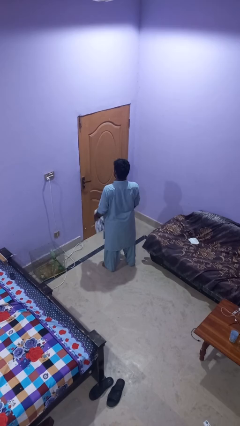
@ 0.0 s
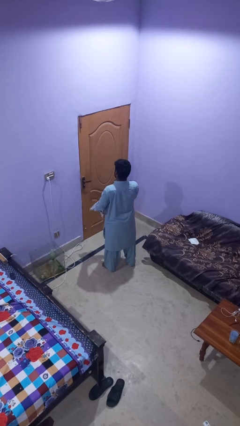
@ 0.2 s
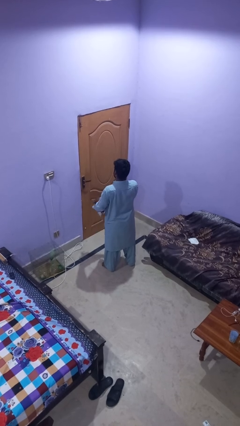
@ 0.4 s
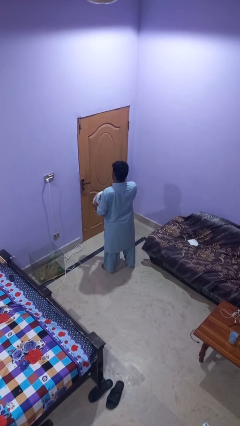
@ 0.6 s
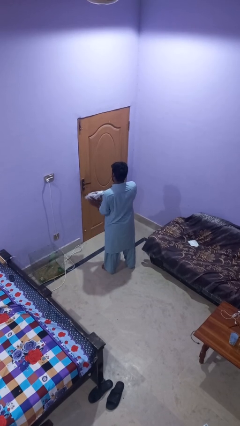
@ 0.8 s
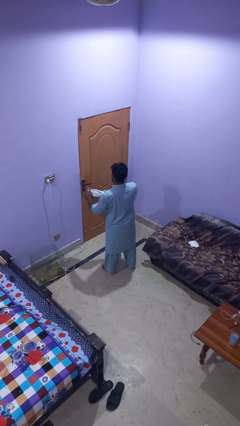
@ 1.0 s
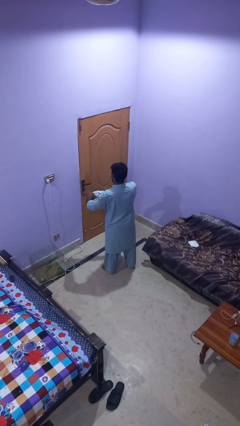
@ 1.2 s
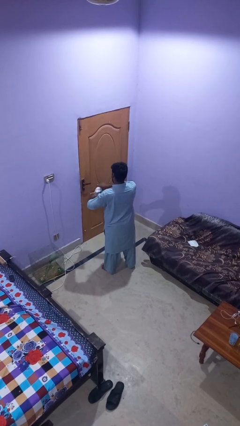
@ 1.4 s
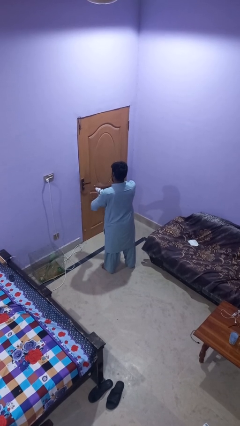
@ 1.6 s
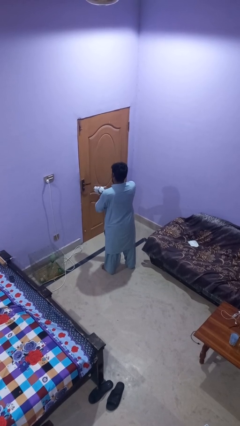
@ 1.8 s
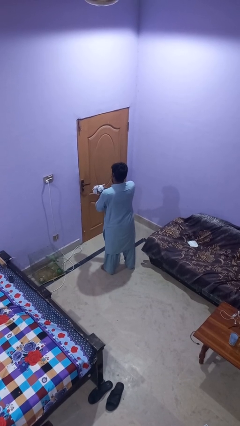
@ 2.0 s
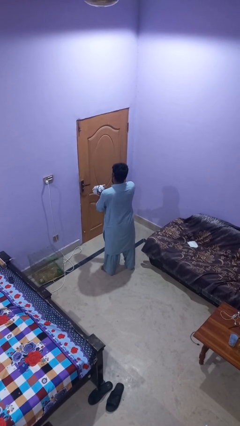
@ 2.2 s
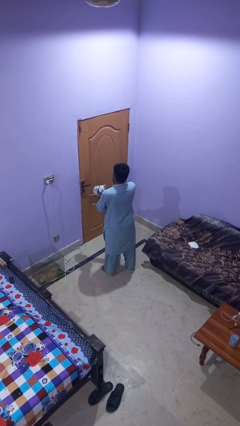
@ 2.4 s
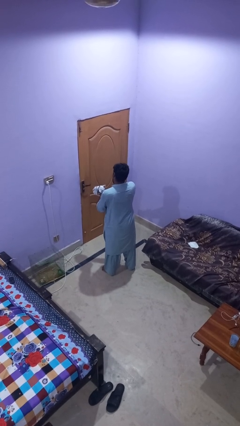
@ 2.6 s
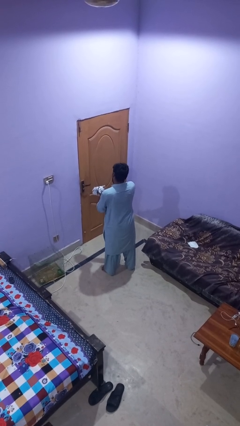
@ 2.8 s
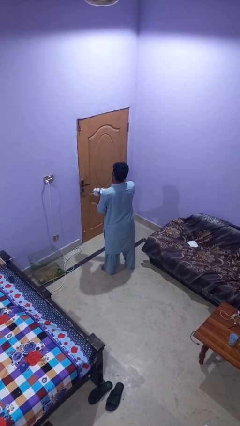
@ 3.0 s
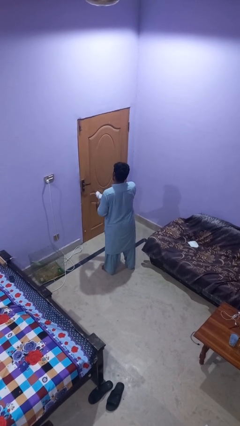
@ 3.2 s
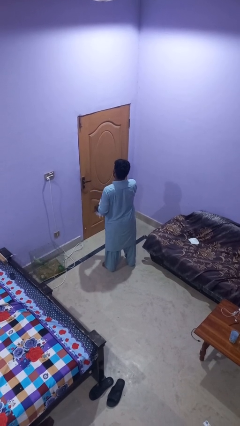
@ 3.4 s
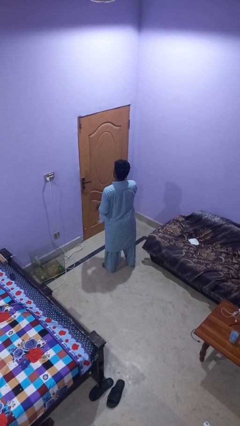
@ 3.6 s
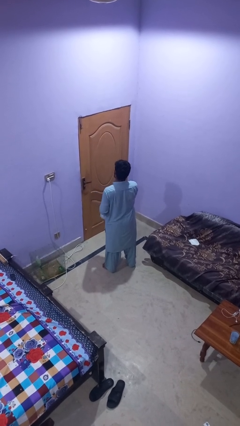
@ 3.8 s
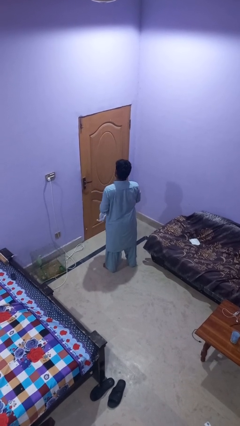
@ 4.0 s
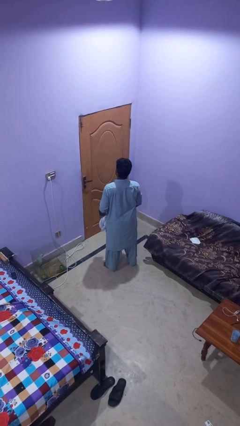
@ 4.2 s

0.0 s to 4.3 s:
person squeezes object

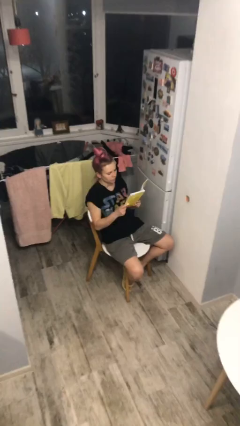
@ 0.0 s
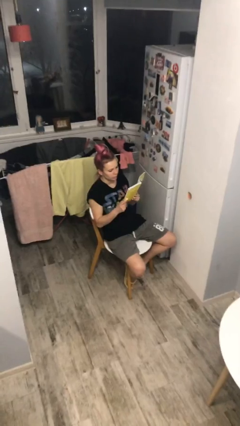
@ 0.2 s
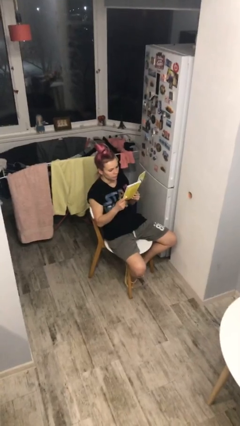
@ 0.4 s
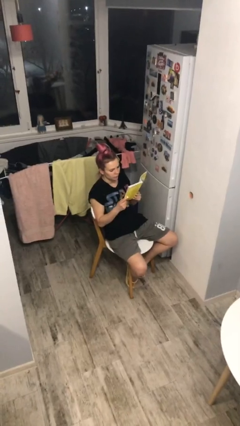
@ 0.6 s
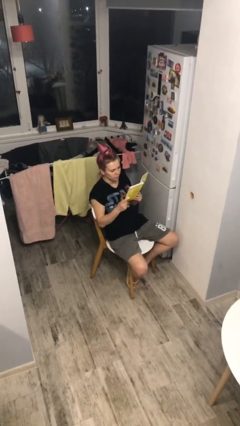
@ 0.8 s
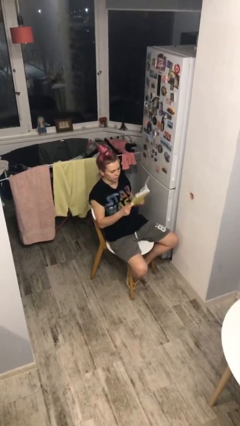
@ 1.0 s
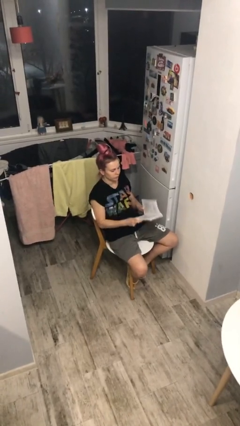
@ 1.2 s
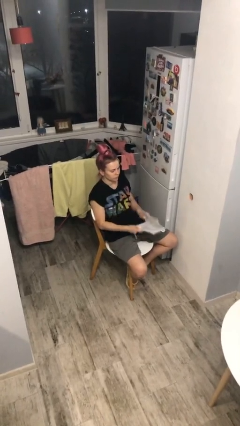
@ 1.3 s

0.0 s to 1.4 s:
person reads document

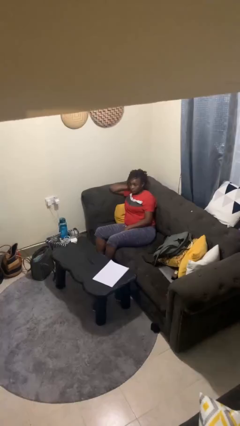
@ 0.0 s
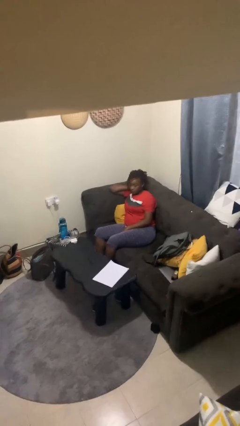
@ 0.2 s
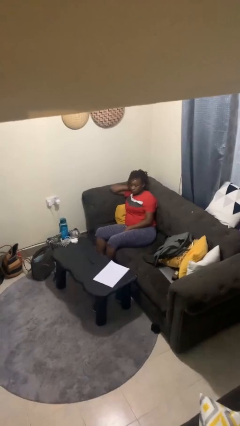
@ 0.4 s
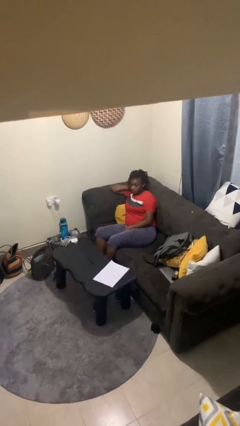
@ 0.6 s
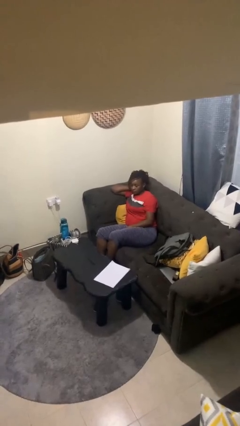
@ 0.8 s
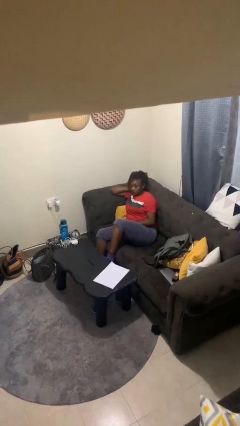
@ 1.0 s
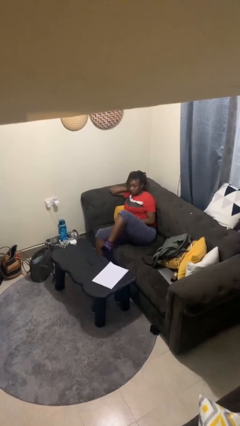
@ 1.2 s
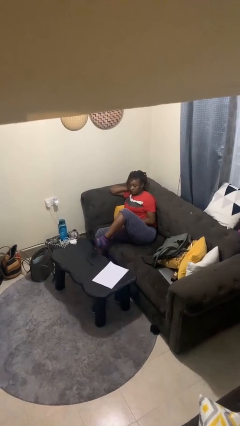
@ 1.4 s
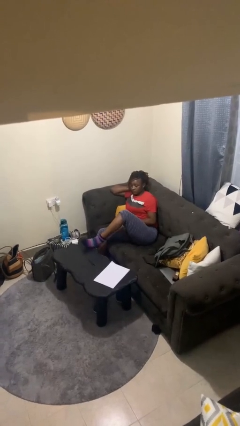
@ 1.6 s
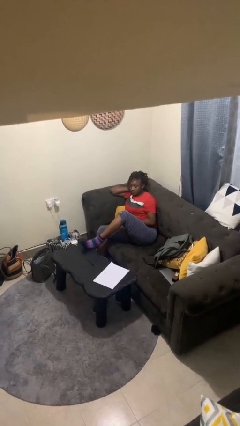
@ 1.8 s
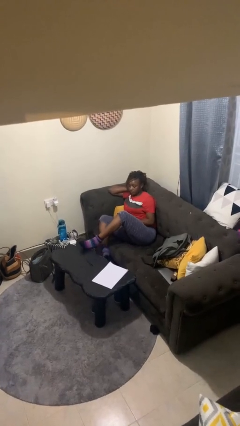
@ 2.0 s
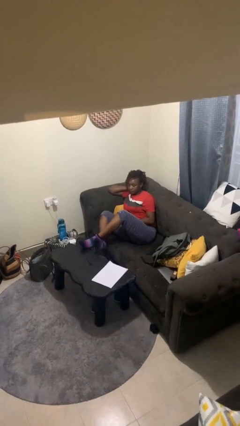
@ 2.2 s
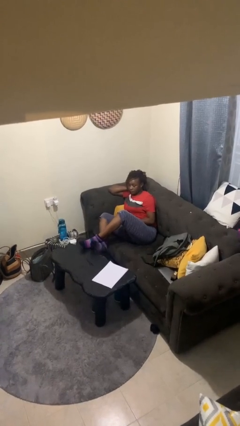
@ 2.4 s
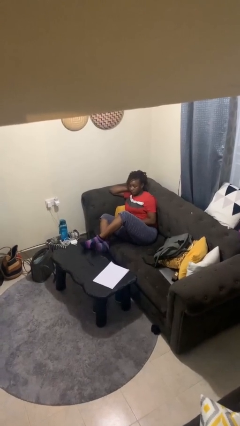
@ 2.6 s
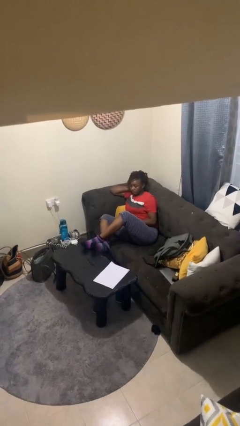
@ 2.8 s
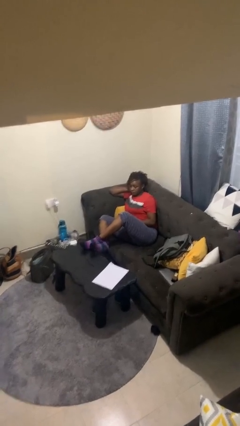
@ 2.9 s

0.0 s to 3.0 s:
person puts feet up

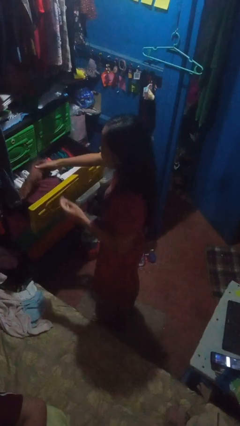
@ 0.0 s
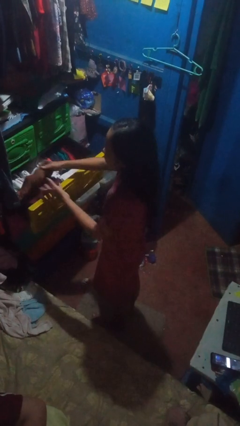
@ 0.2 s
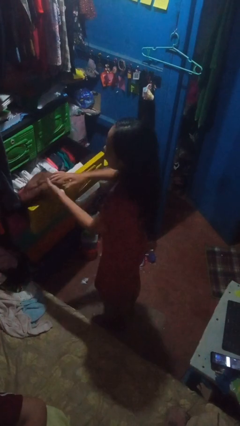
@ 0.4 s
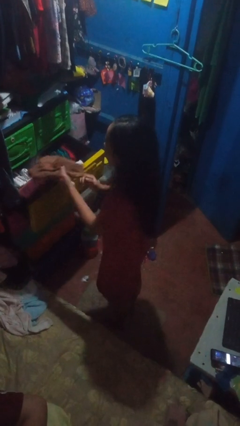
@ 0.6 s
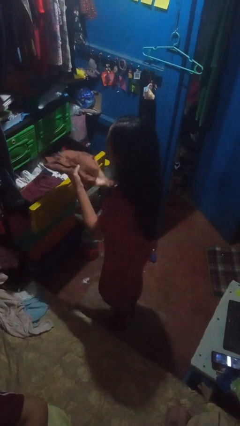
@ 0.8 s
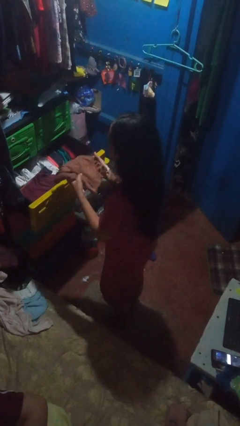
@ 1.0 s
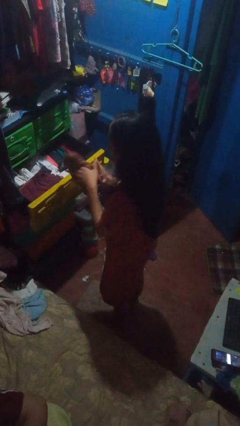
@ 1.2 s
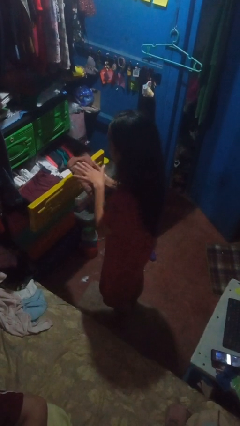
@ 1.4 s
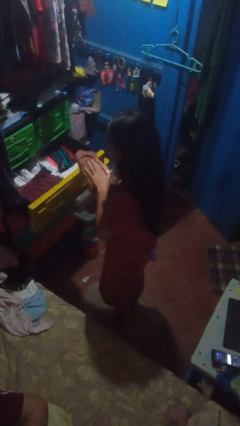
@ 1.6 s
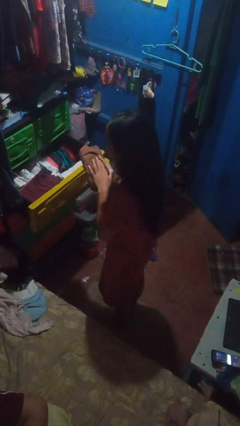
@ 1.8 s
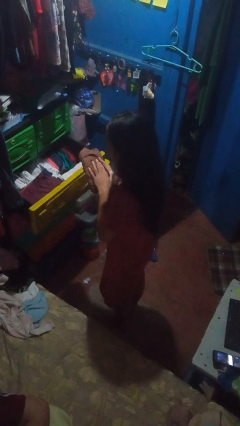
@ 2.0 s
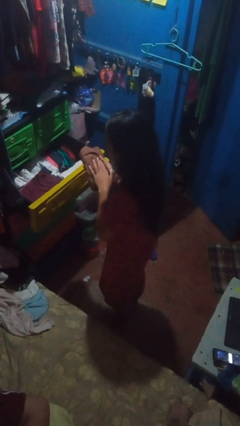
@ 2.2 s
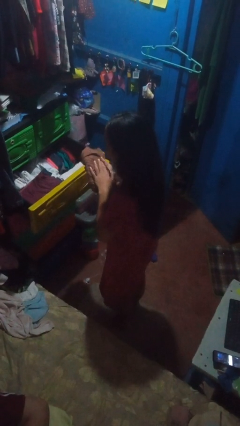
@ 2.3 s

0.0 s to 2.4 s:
person takes clothes from dresser

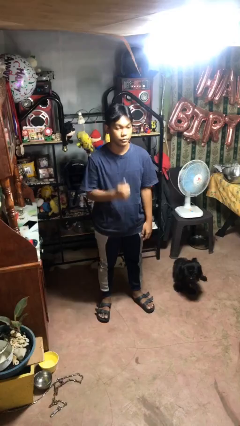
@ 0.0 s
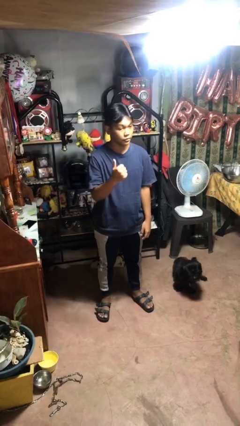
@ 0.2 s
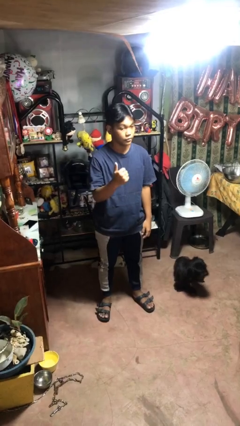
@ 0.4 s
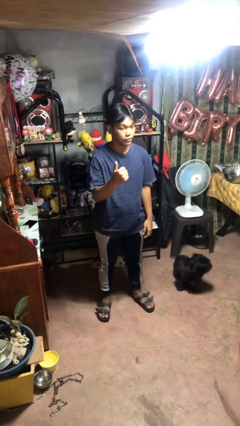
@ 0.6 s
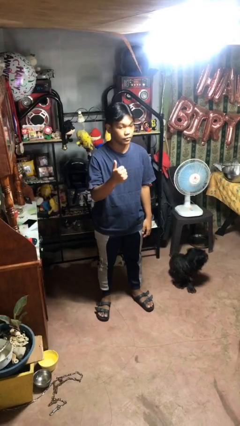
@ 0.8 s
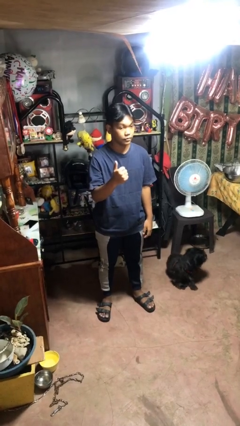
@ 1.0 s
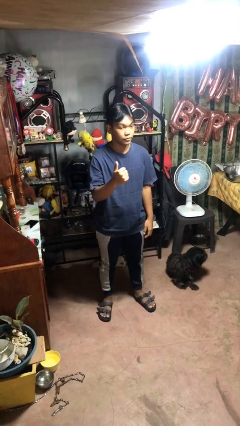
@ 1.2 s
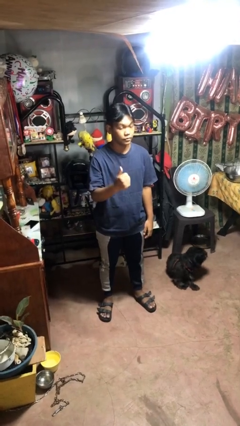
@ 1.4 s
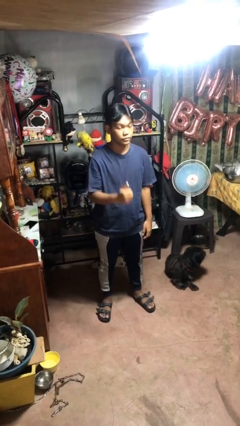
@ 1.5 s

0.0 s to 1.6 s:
person gestures thumbs up

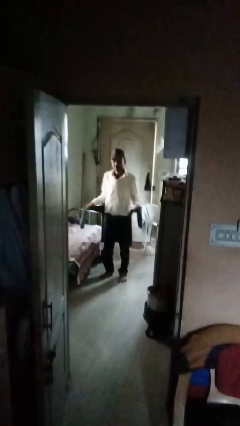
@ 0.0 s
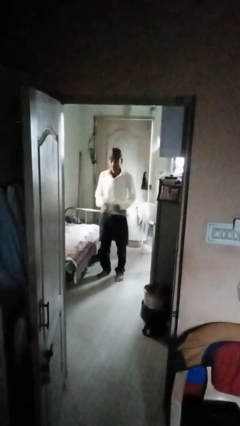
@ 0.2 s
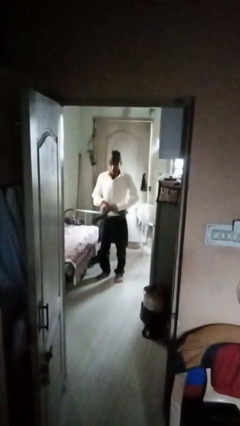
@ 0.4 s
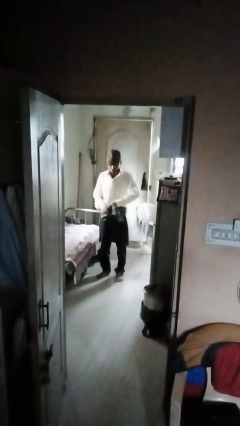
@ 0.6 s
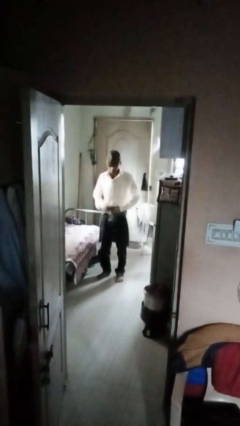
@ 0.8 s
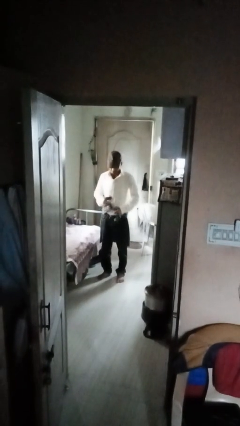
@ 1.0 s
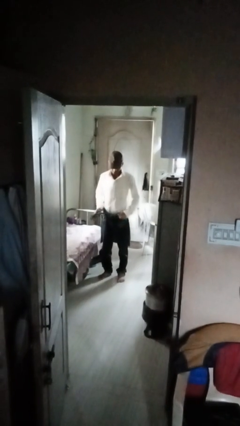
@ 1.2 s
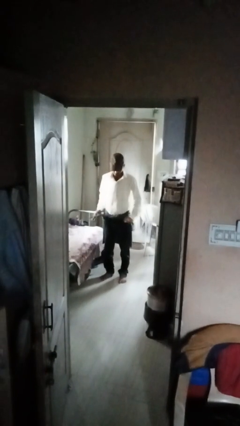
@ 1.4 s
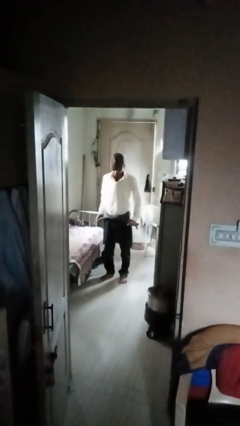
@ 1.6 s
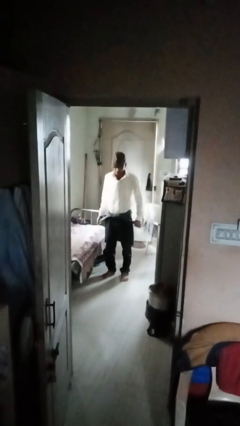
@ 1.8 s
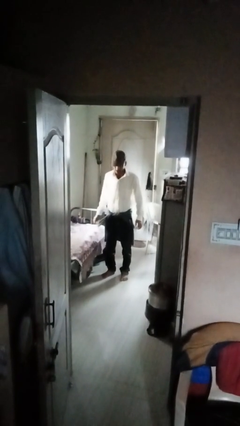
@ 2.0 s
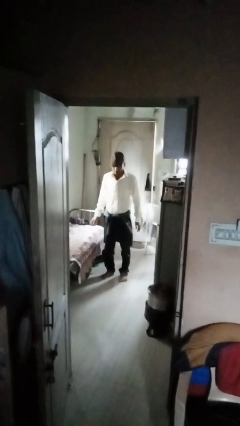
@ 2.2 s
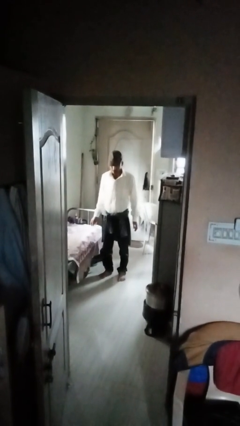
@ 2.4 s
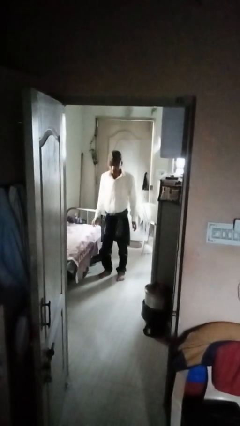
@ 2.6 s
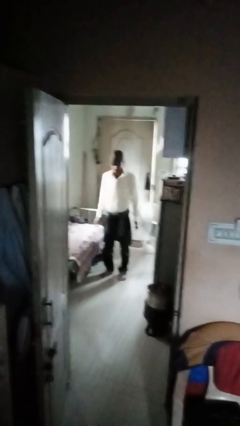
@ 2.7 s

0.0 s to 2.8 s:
person ties jacket around waist

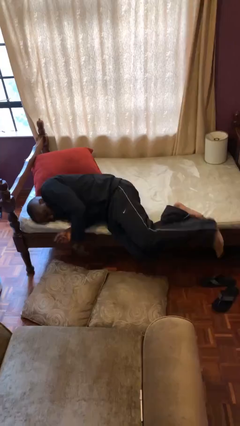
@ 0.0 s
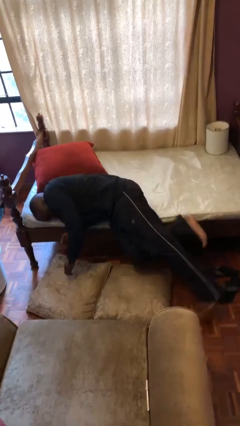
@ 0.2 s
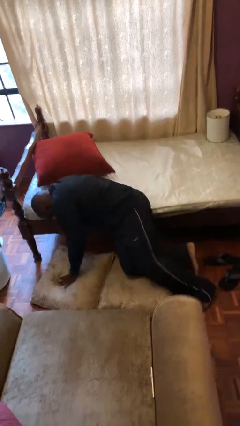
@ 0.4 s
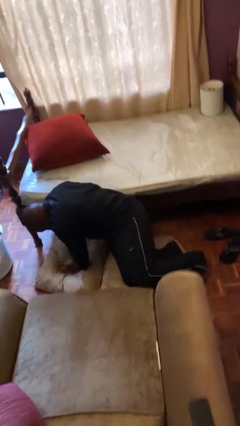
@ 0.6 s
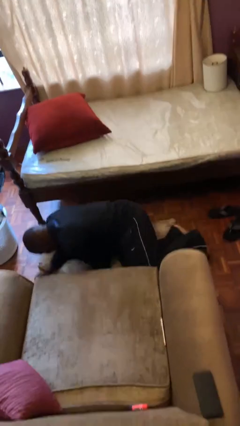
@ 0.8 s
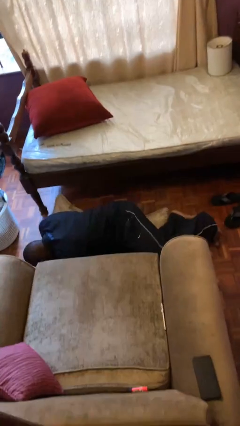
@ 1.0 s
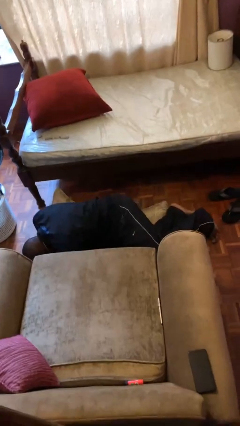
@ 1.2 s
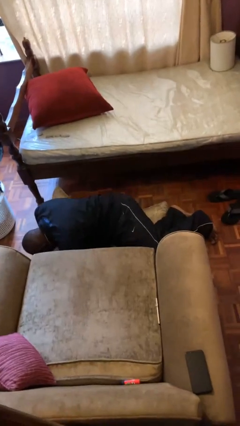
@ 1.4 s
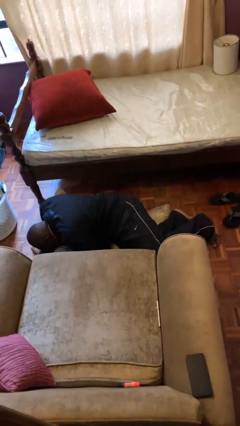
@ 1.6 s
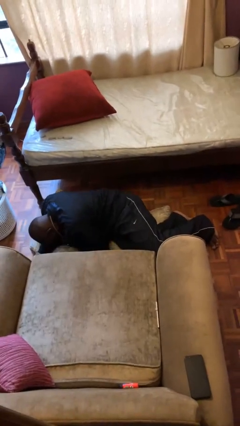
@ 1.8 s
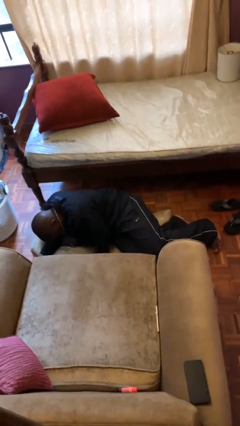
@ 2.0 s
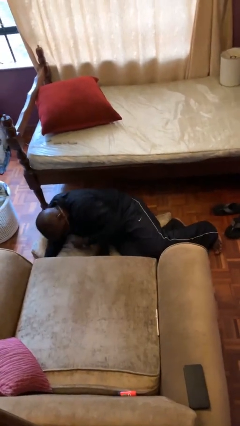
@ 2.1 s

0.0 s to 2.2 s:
person falls from bed
